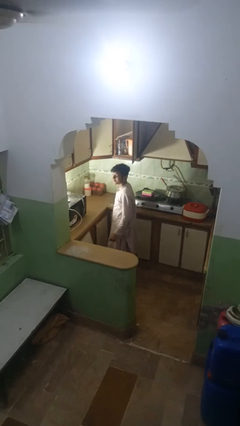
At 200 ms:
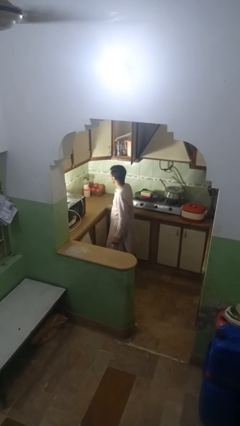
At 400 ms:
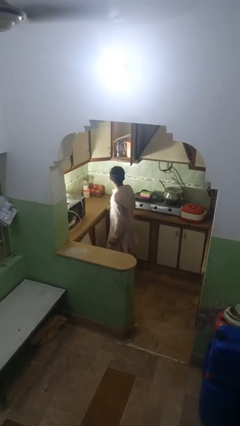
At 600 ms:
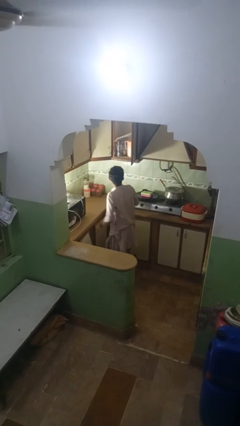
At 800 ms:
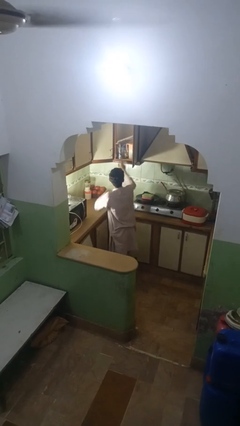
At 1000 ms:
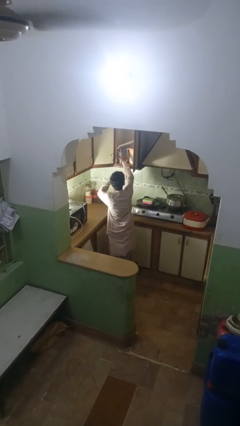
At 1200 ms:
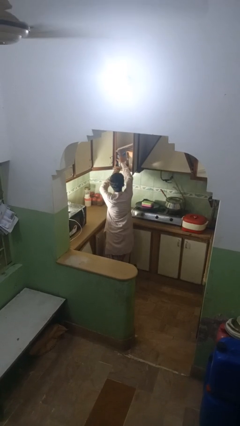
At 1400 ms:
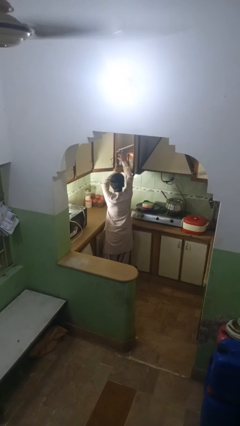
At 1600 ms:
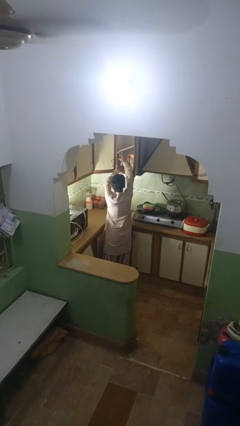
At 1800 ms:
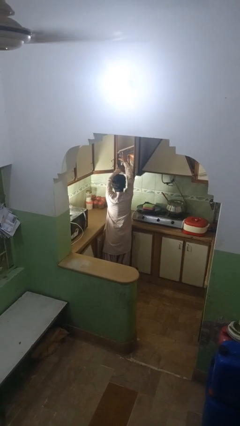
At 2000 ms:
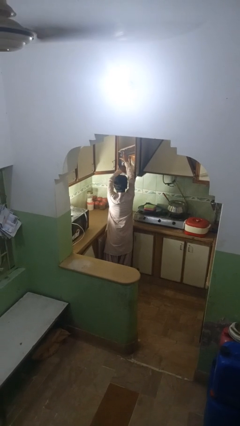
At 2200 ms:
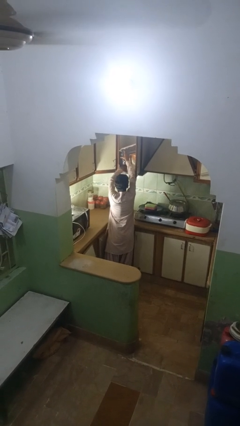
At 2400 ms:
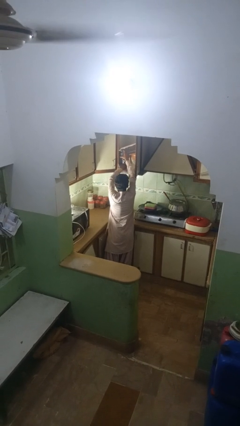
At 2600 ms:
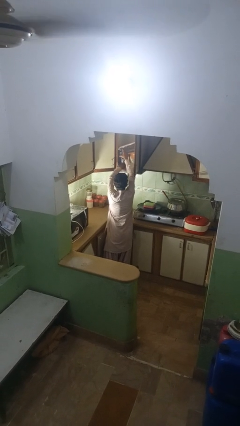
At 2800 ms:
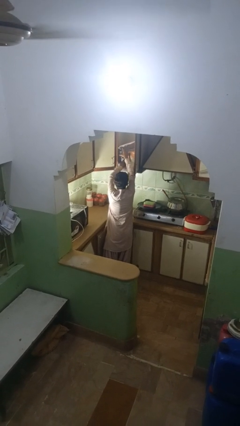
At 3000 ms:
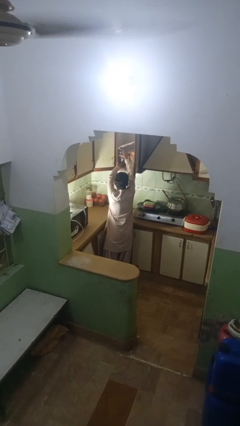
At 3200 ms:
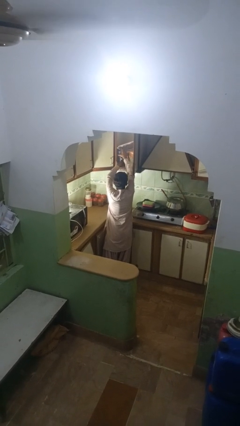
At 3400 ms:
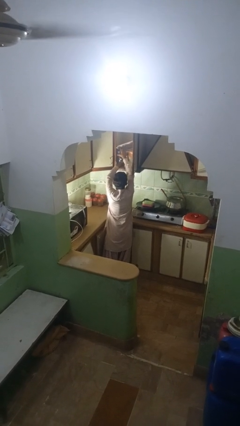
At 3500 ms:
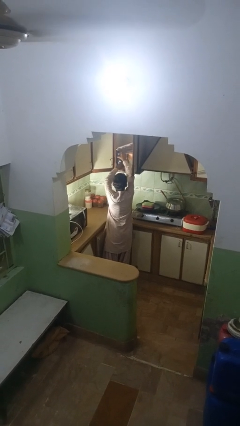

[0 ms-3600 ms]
person searches in kitchen drawer

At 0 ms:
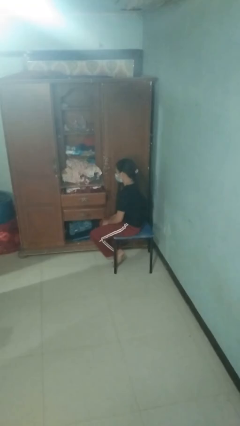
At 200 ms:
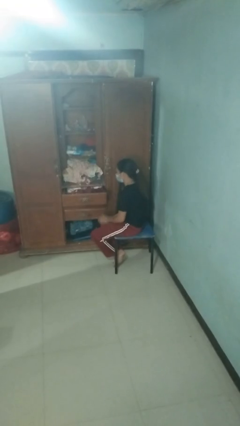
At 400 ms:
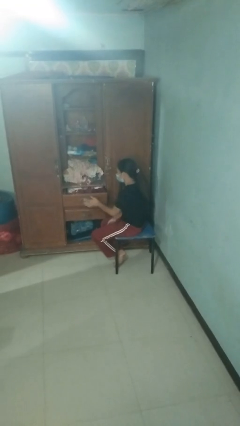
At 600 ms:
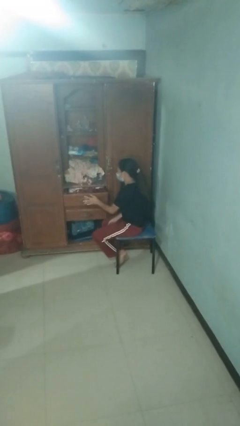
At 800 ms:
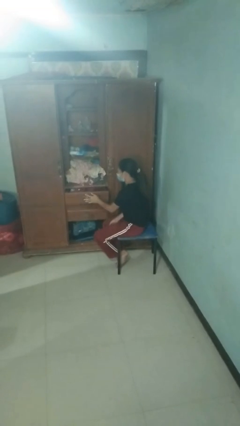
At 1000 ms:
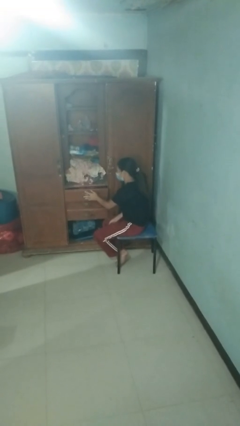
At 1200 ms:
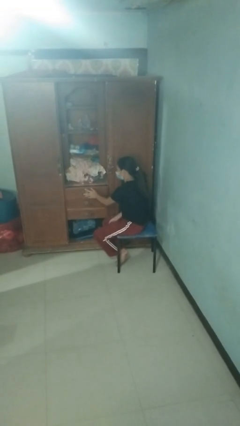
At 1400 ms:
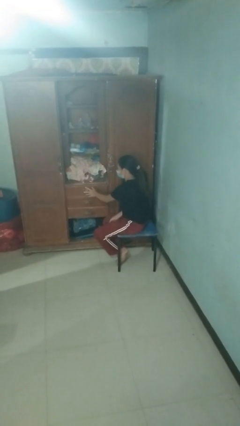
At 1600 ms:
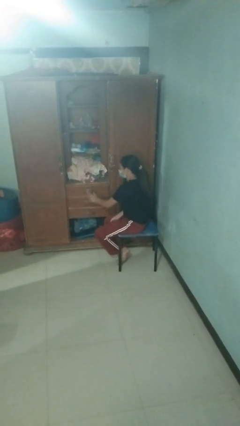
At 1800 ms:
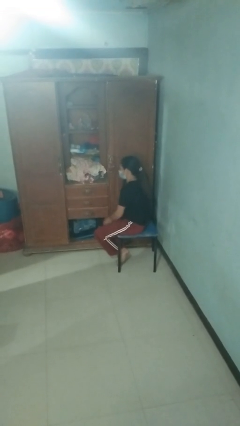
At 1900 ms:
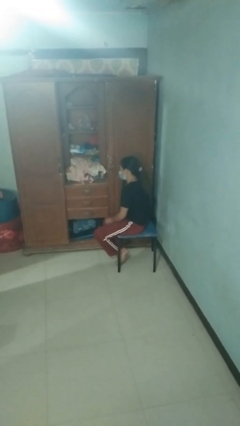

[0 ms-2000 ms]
person closes dresser drawer

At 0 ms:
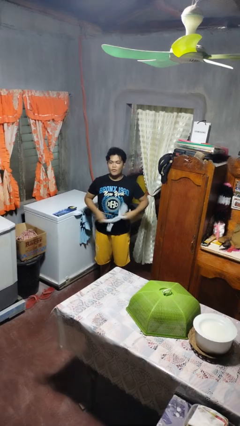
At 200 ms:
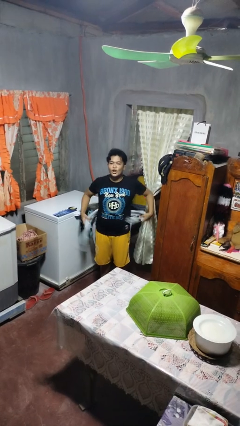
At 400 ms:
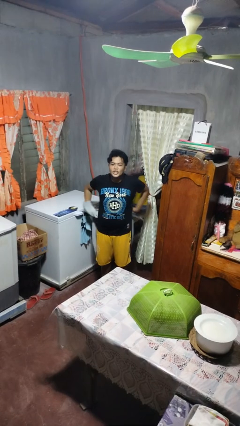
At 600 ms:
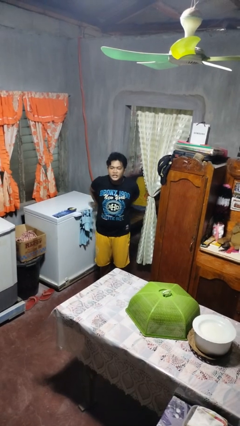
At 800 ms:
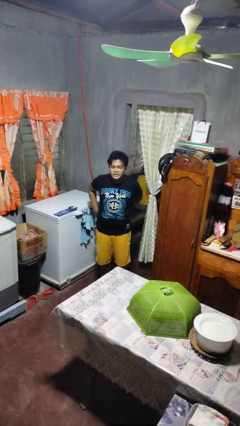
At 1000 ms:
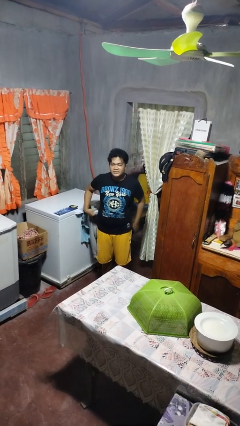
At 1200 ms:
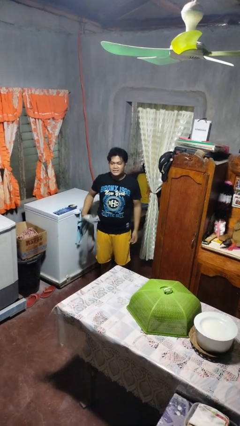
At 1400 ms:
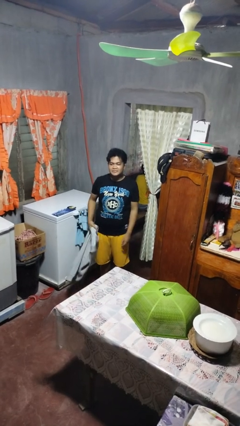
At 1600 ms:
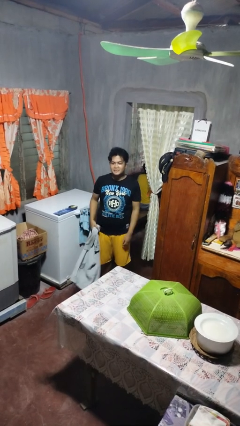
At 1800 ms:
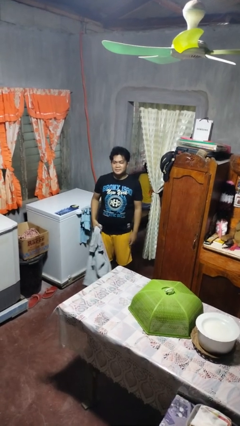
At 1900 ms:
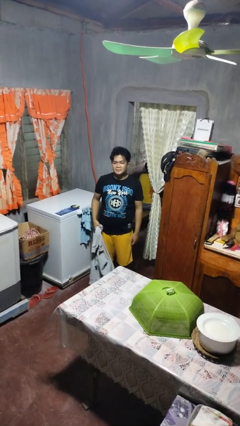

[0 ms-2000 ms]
person unties jacket around waist

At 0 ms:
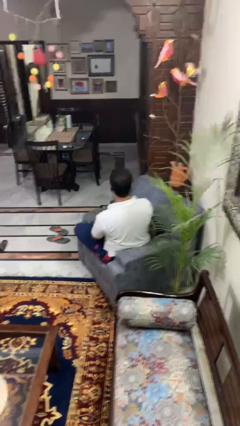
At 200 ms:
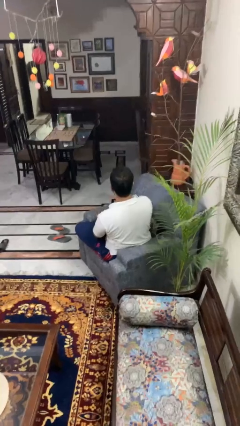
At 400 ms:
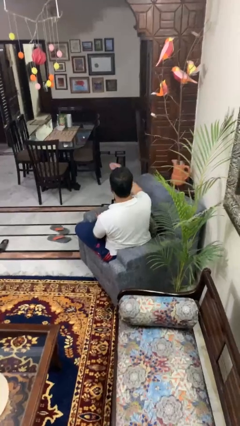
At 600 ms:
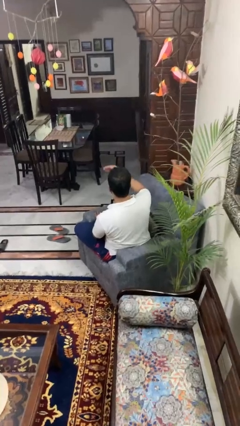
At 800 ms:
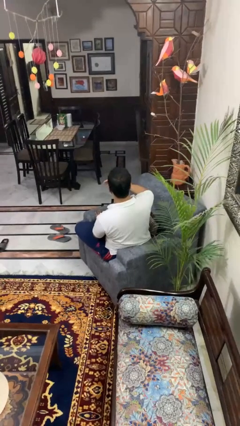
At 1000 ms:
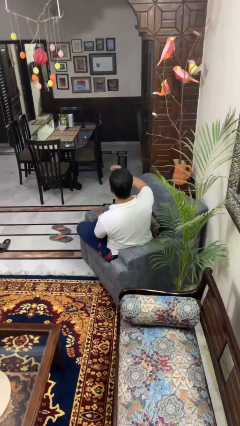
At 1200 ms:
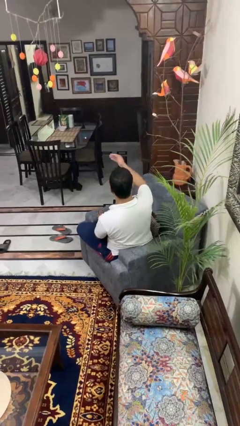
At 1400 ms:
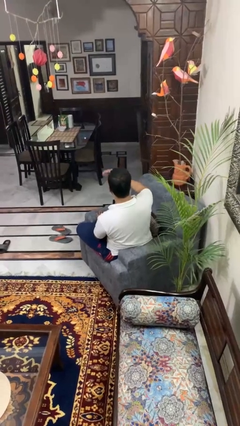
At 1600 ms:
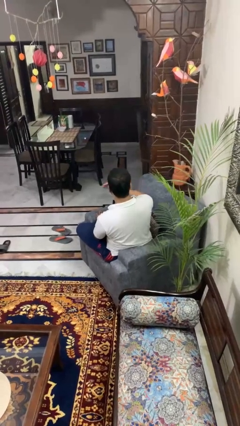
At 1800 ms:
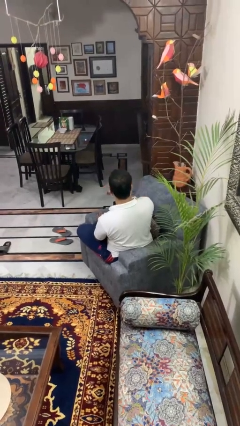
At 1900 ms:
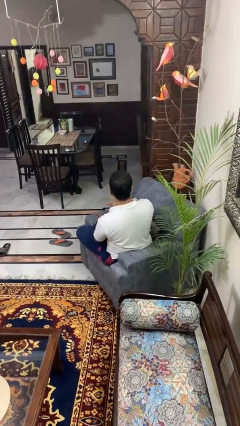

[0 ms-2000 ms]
person gestures come here

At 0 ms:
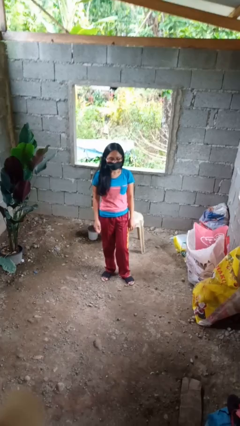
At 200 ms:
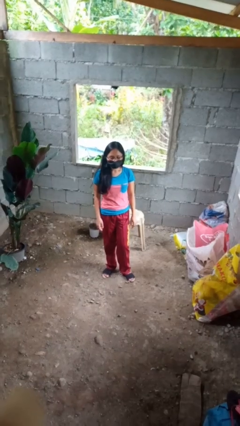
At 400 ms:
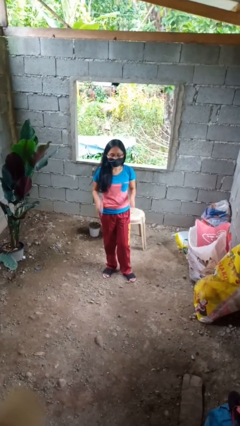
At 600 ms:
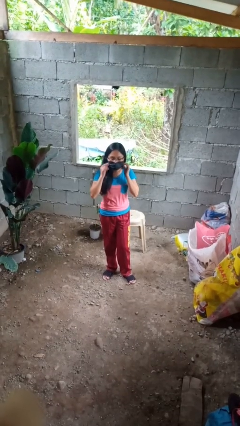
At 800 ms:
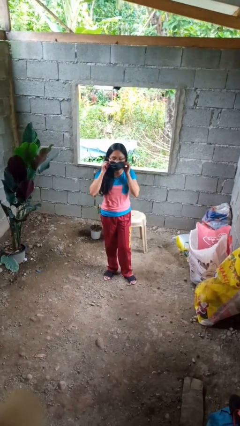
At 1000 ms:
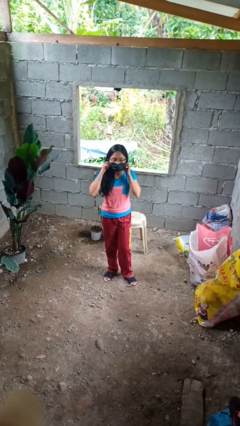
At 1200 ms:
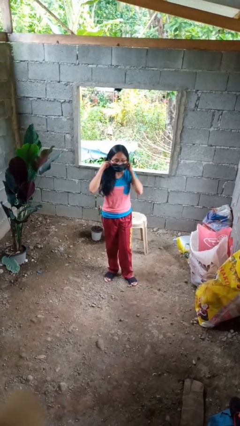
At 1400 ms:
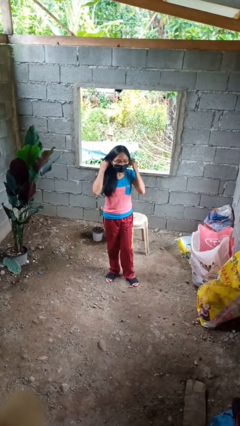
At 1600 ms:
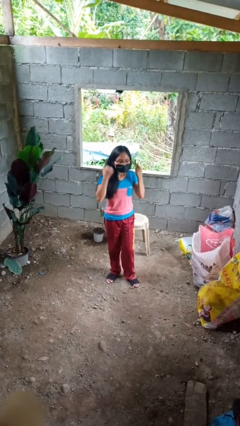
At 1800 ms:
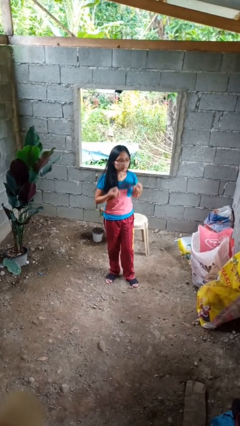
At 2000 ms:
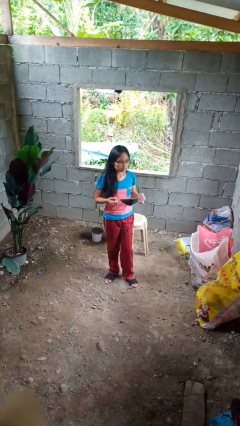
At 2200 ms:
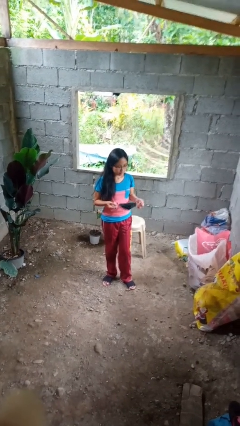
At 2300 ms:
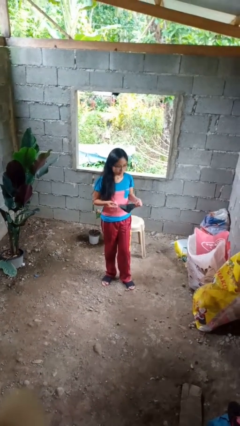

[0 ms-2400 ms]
person takes off facemask

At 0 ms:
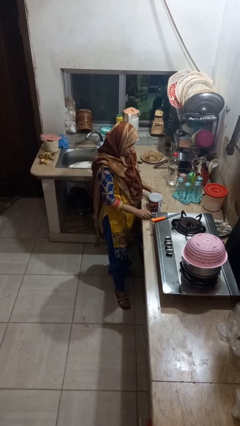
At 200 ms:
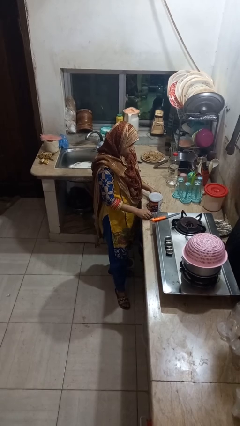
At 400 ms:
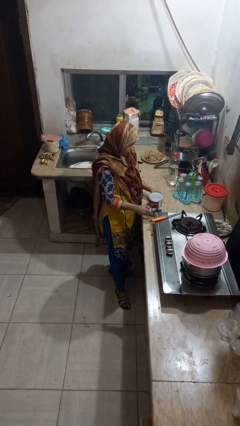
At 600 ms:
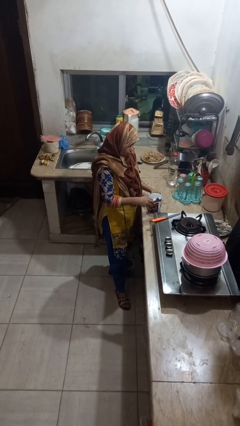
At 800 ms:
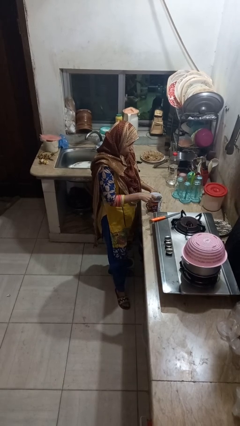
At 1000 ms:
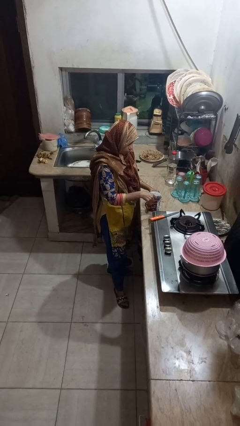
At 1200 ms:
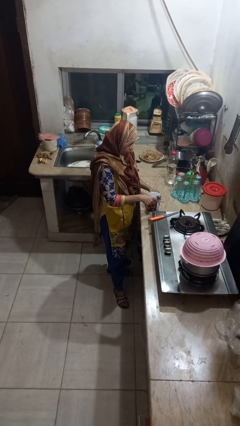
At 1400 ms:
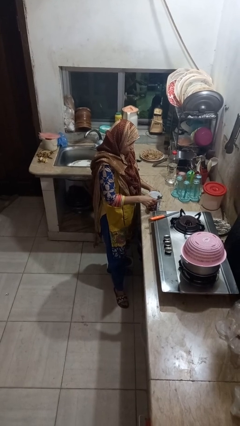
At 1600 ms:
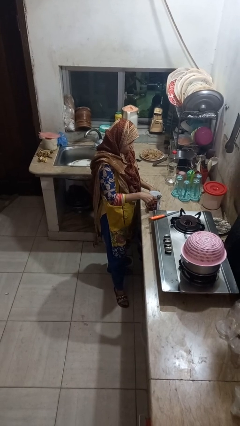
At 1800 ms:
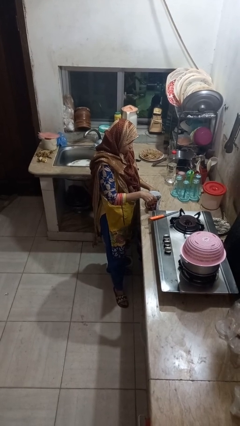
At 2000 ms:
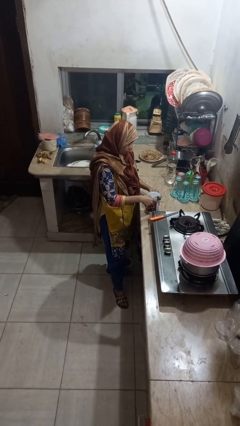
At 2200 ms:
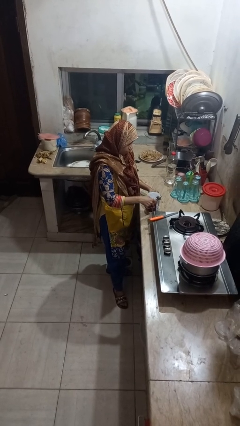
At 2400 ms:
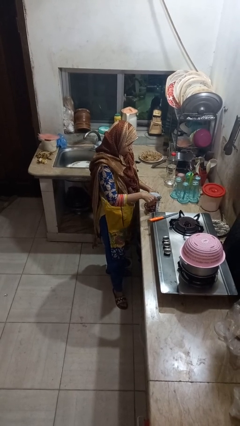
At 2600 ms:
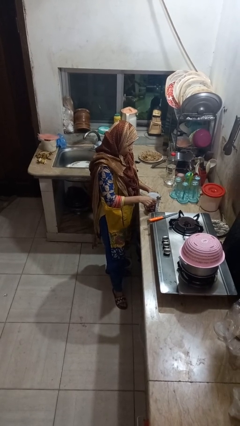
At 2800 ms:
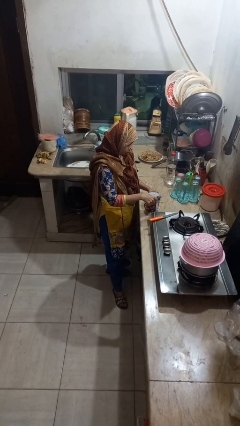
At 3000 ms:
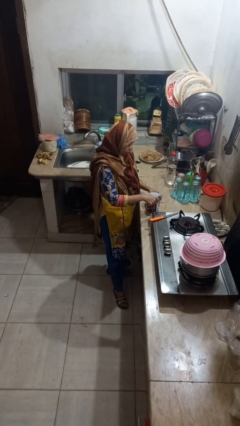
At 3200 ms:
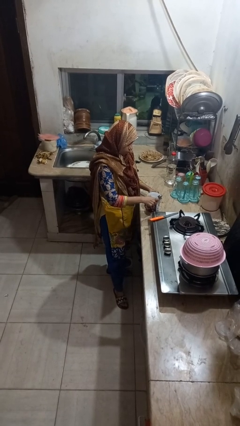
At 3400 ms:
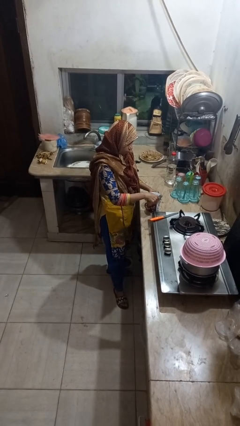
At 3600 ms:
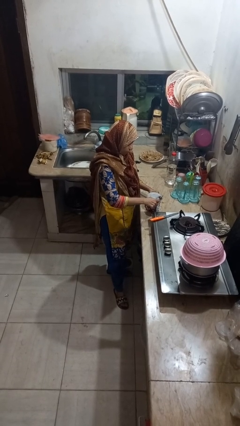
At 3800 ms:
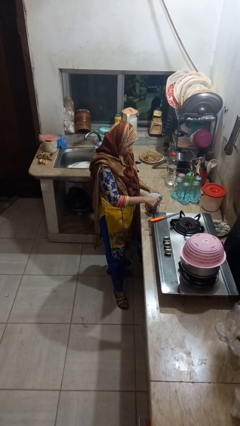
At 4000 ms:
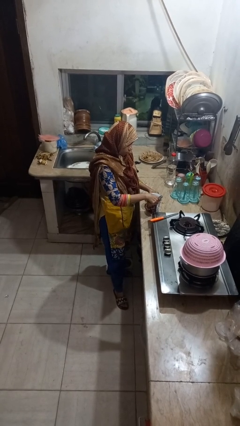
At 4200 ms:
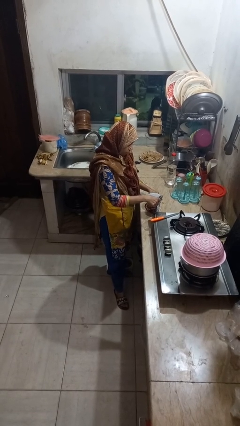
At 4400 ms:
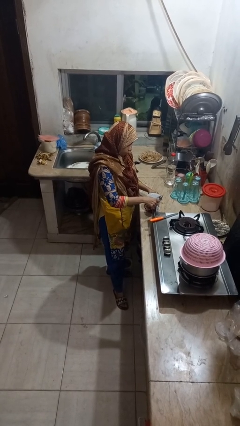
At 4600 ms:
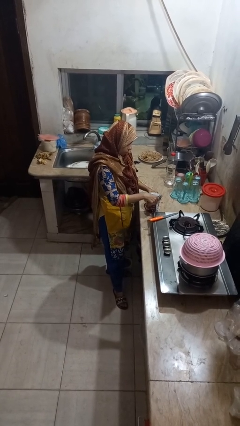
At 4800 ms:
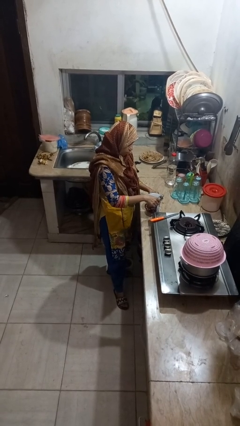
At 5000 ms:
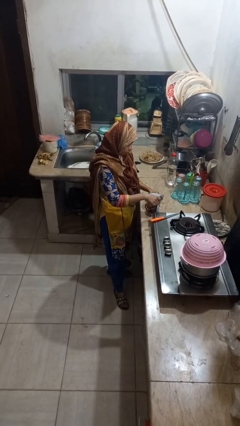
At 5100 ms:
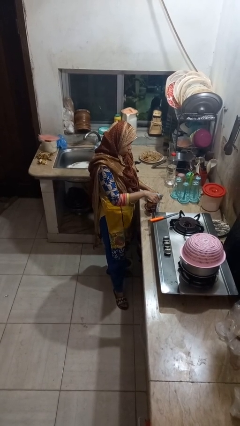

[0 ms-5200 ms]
person opens can with can opener

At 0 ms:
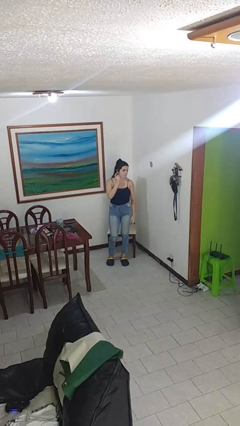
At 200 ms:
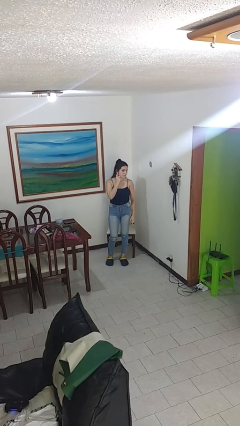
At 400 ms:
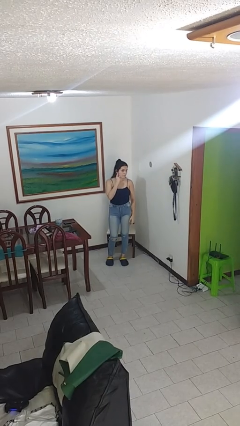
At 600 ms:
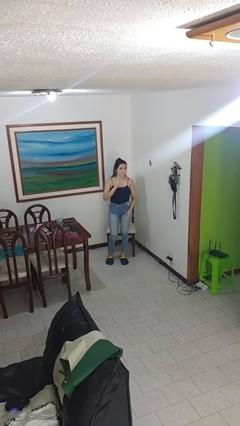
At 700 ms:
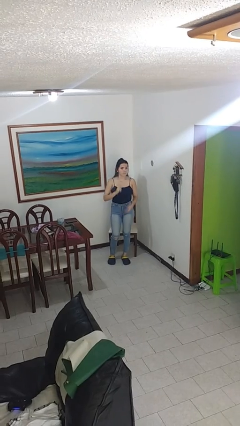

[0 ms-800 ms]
person gestures listen closely
